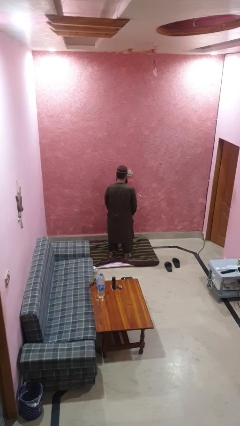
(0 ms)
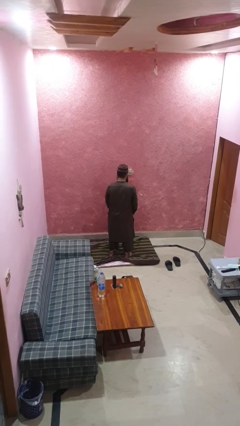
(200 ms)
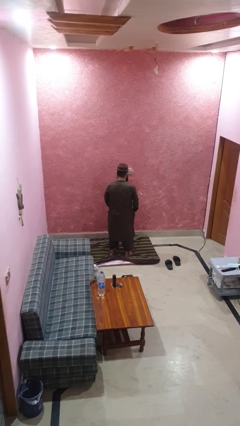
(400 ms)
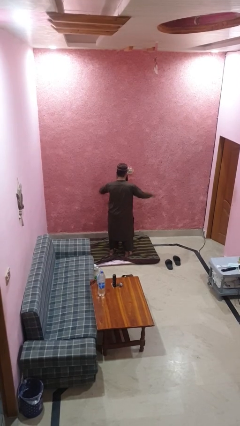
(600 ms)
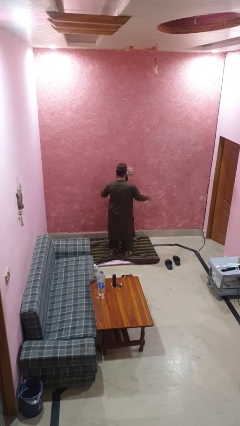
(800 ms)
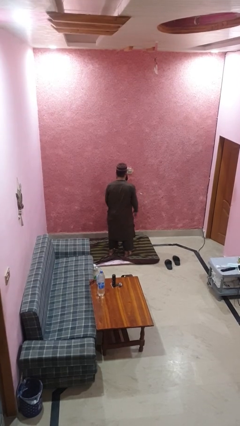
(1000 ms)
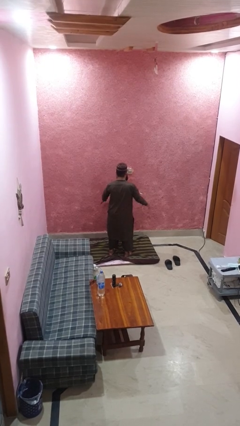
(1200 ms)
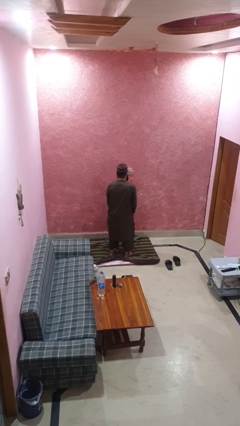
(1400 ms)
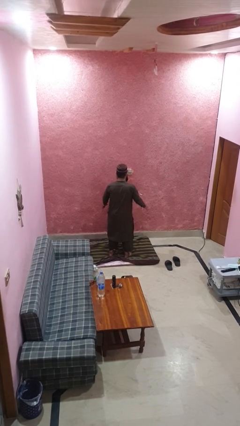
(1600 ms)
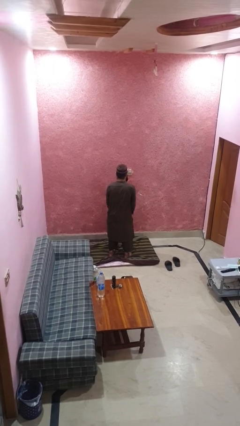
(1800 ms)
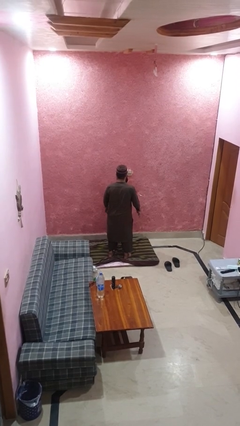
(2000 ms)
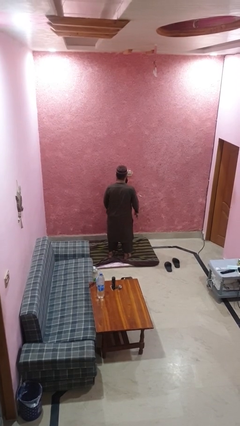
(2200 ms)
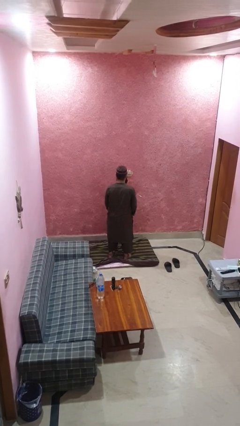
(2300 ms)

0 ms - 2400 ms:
person slaps hands on thighs

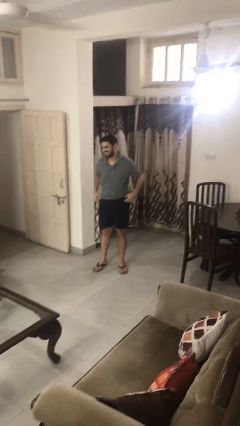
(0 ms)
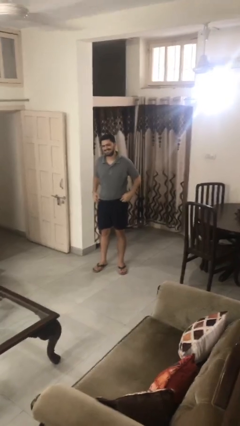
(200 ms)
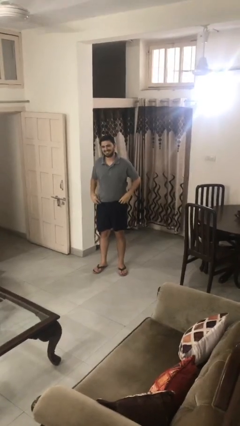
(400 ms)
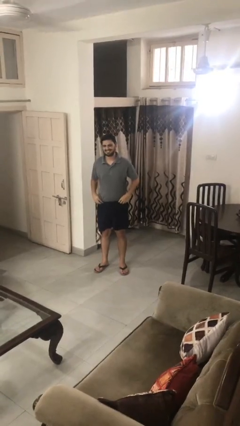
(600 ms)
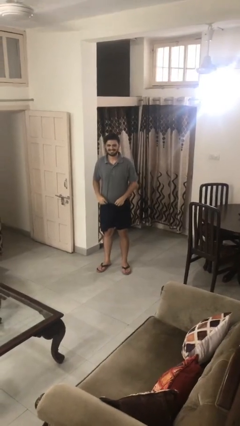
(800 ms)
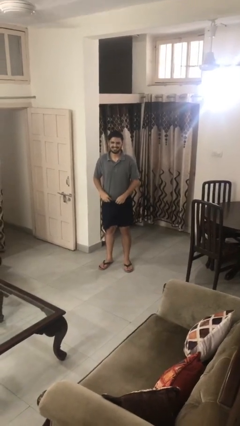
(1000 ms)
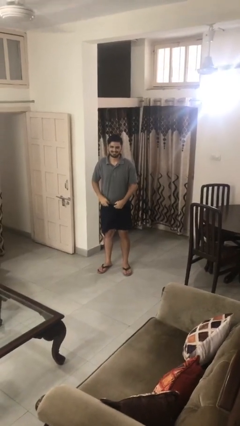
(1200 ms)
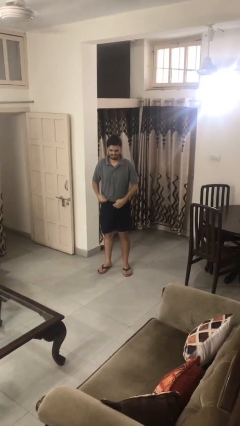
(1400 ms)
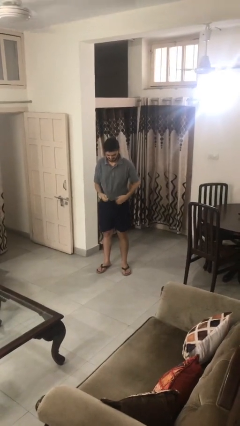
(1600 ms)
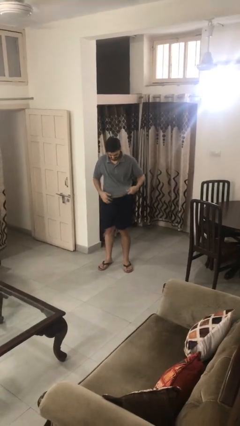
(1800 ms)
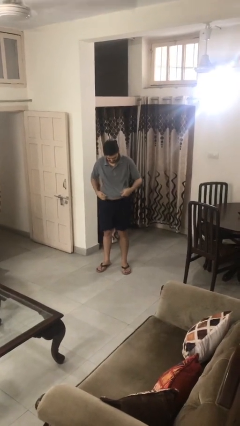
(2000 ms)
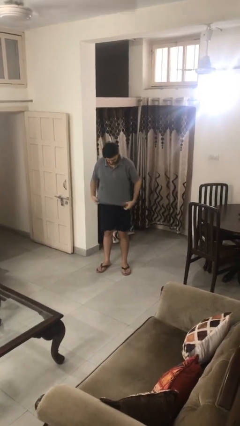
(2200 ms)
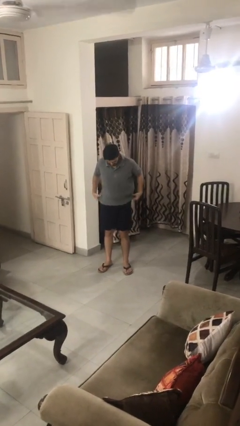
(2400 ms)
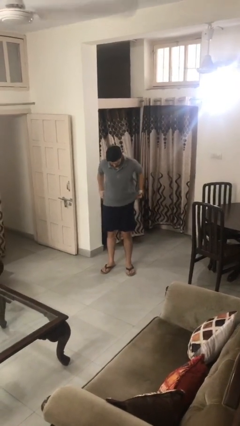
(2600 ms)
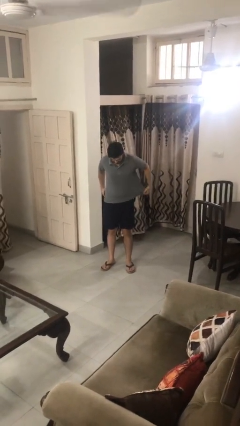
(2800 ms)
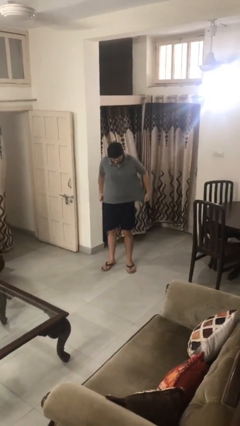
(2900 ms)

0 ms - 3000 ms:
person untucks shirt

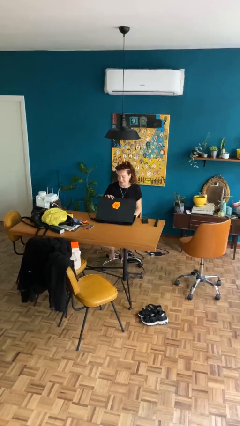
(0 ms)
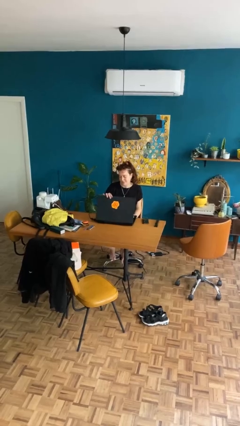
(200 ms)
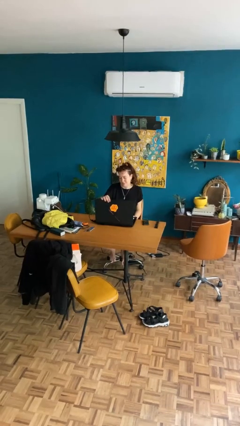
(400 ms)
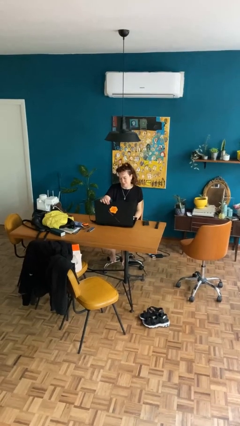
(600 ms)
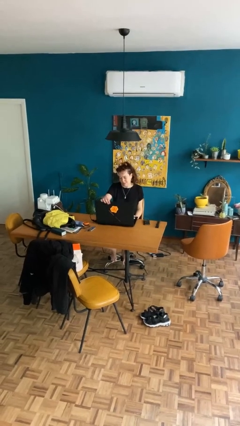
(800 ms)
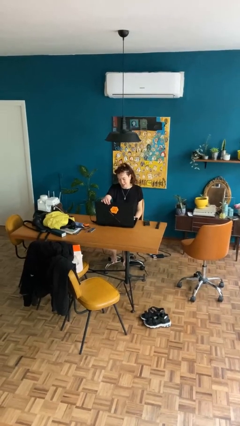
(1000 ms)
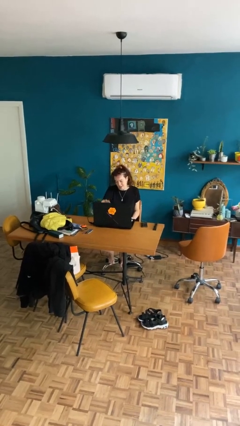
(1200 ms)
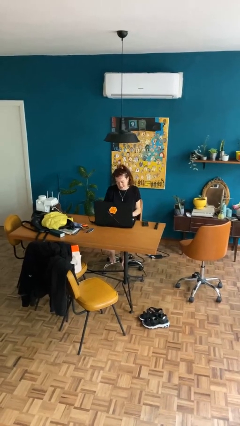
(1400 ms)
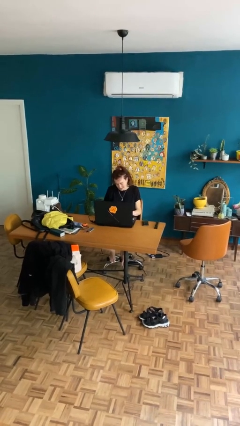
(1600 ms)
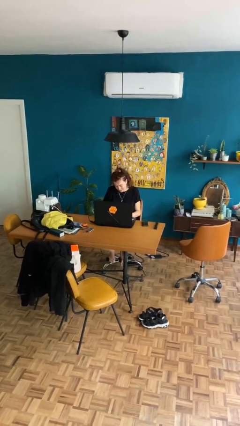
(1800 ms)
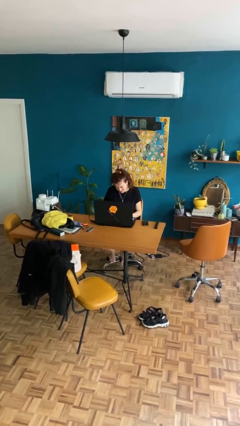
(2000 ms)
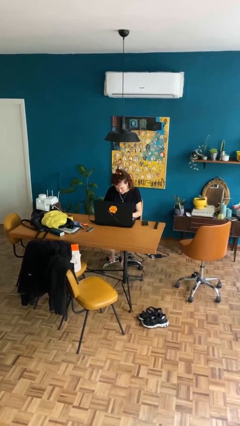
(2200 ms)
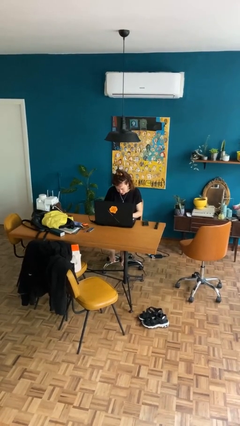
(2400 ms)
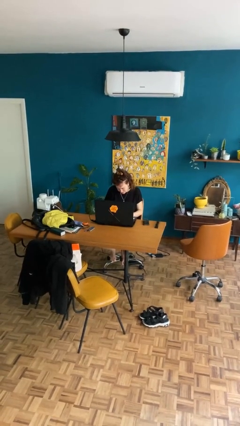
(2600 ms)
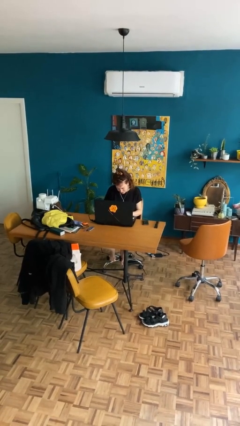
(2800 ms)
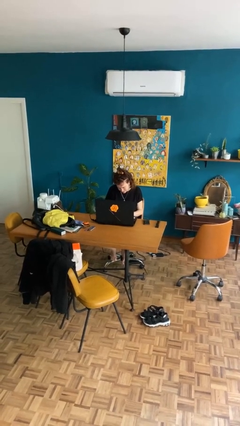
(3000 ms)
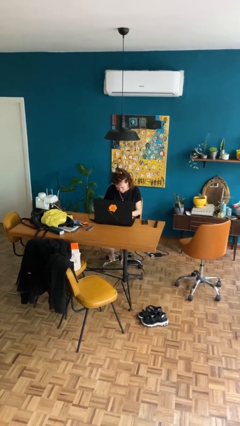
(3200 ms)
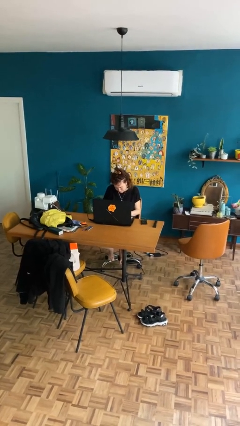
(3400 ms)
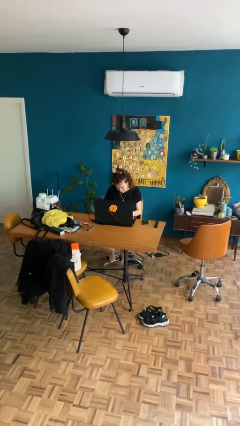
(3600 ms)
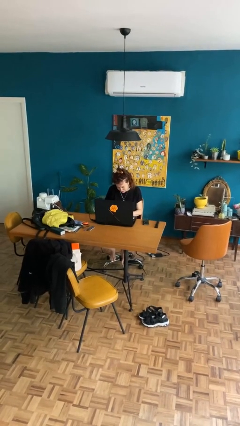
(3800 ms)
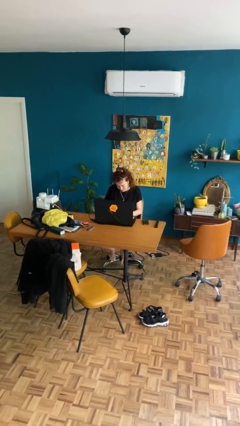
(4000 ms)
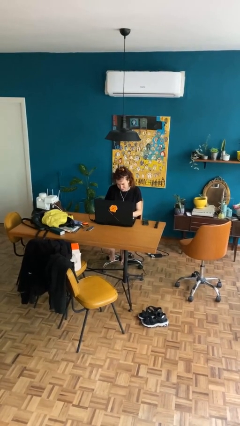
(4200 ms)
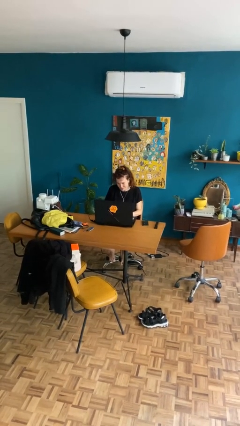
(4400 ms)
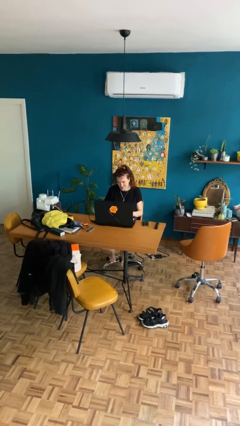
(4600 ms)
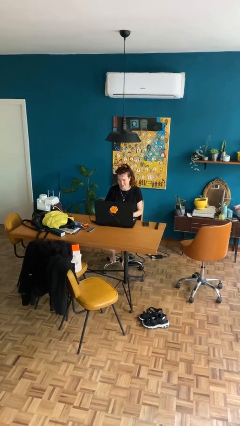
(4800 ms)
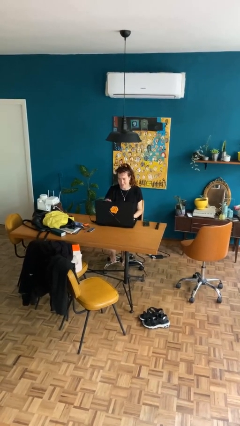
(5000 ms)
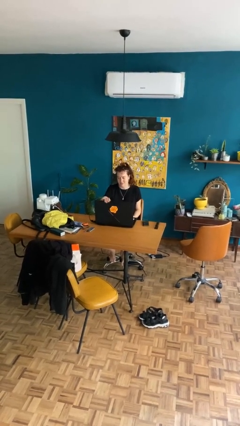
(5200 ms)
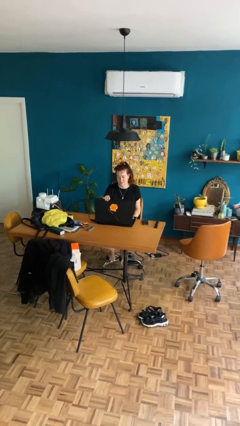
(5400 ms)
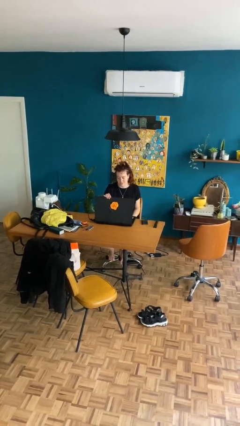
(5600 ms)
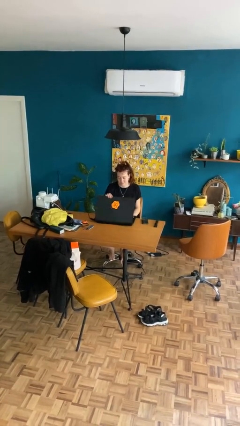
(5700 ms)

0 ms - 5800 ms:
person interacts with laptop

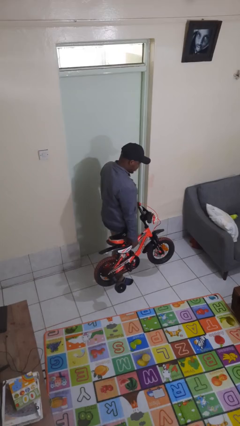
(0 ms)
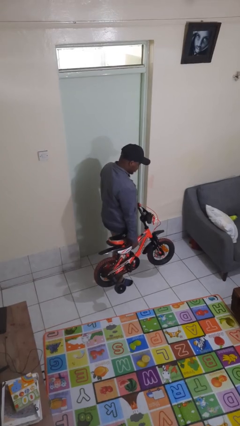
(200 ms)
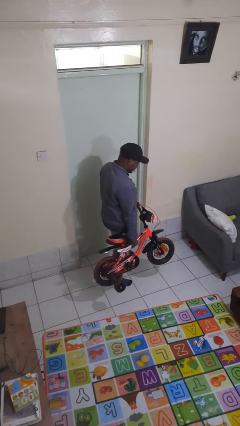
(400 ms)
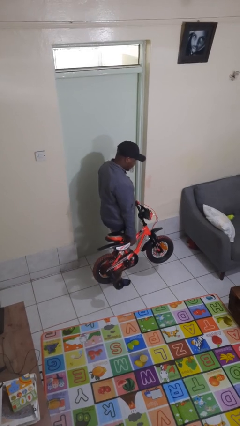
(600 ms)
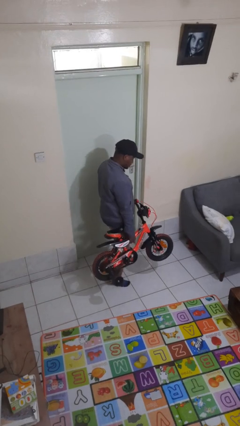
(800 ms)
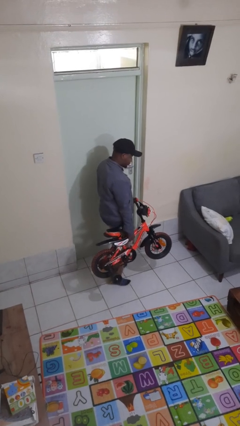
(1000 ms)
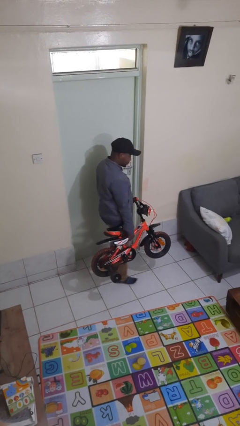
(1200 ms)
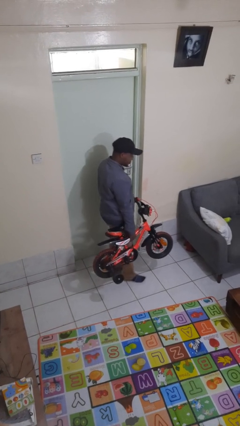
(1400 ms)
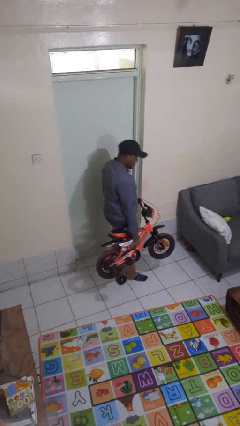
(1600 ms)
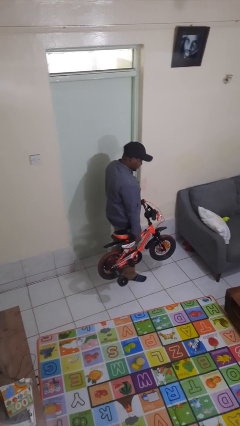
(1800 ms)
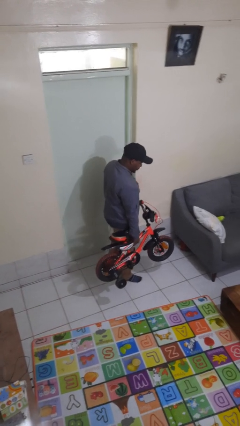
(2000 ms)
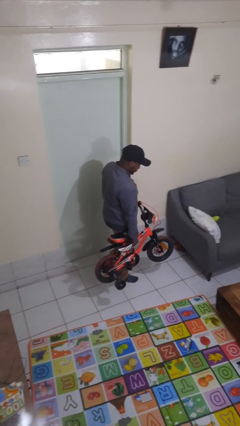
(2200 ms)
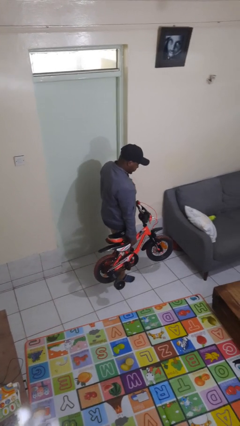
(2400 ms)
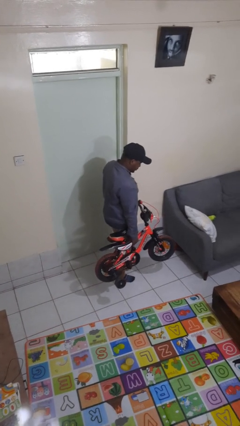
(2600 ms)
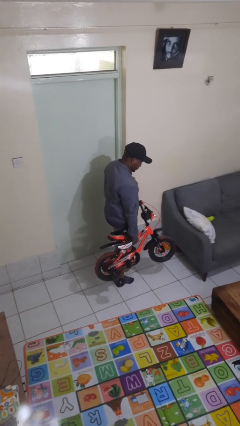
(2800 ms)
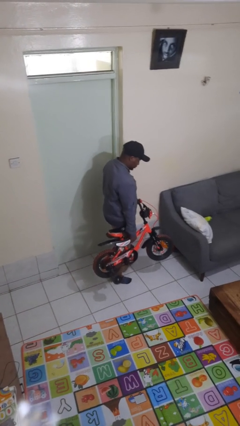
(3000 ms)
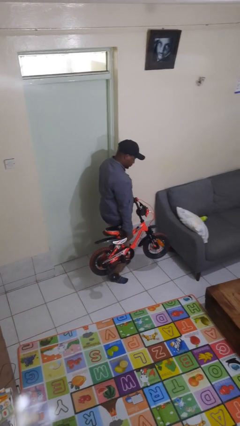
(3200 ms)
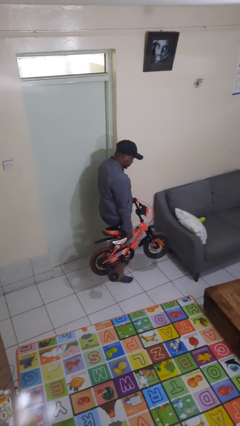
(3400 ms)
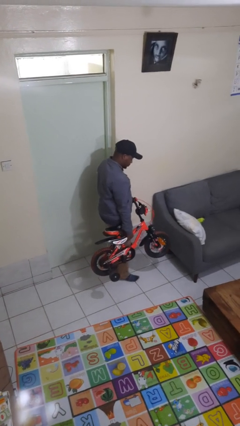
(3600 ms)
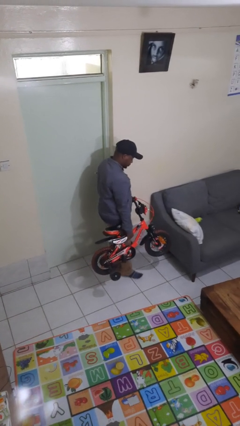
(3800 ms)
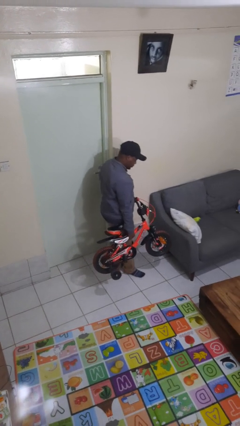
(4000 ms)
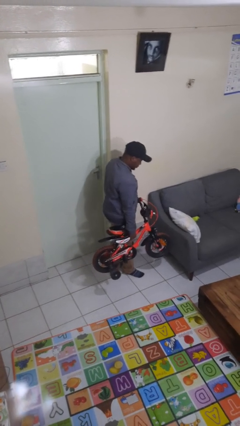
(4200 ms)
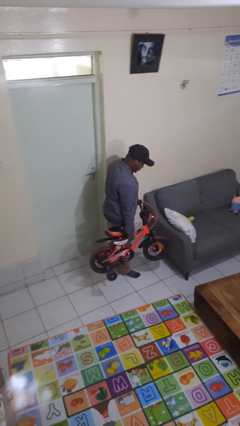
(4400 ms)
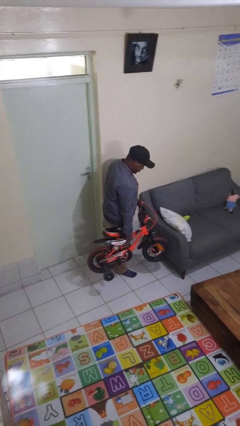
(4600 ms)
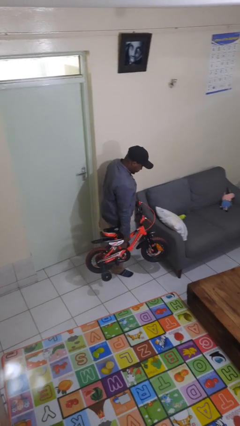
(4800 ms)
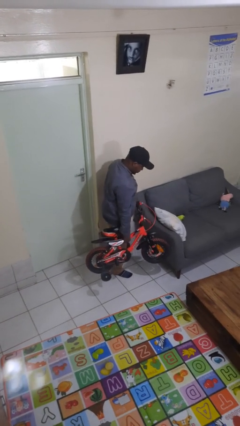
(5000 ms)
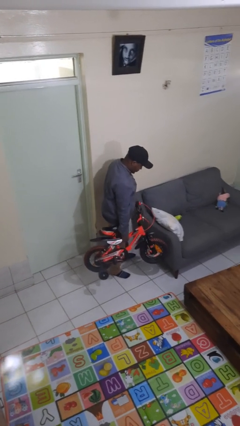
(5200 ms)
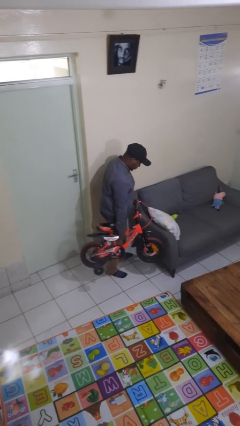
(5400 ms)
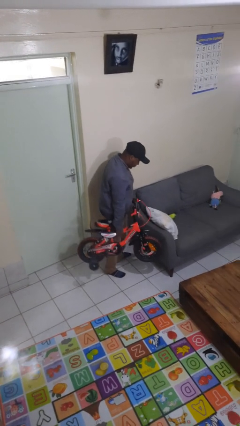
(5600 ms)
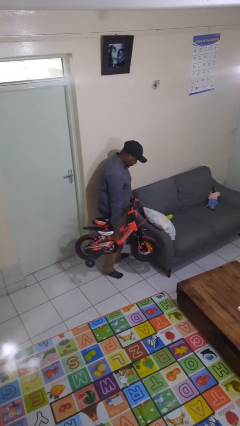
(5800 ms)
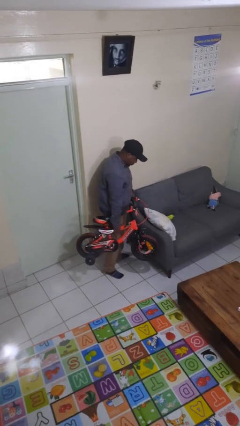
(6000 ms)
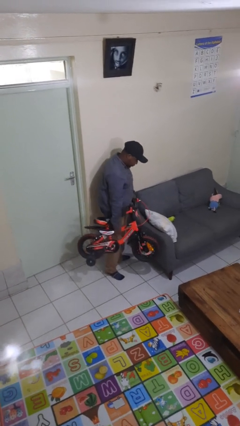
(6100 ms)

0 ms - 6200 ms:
person carries bicycle
